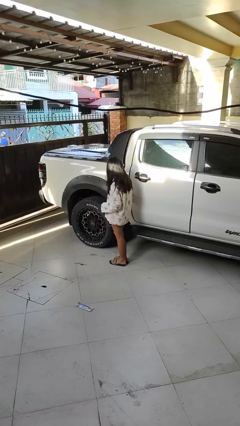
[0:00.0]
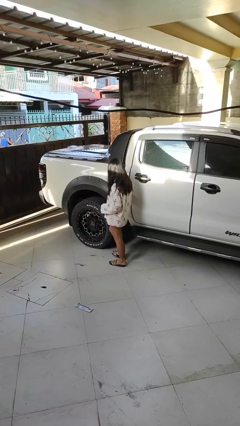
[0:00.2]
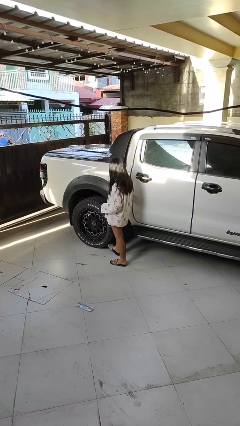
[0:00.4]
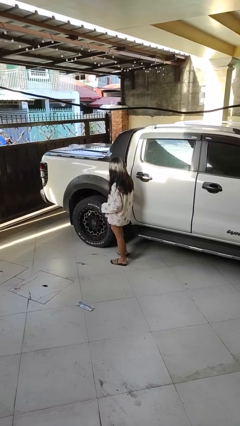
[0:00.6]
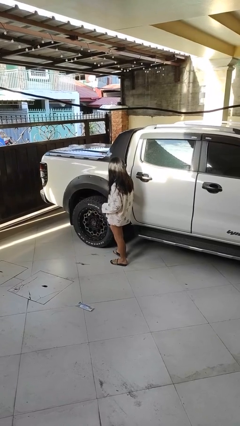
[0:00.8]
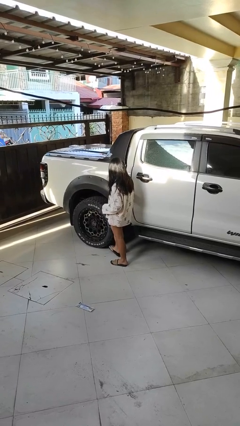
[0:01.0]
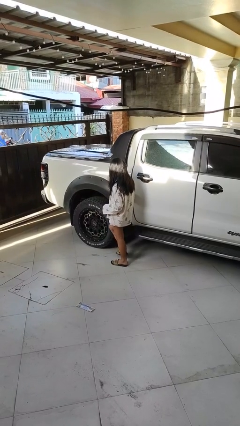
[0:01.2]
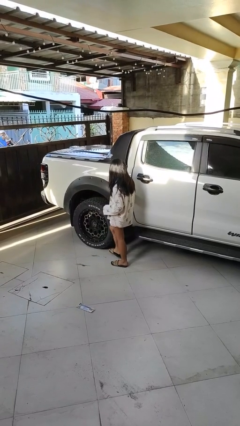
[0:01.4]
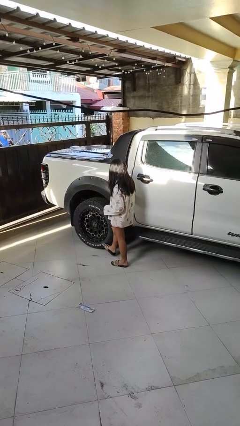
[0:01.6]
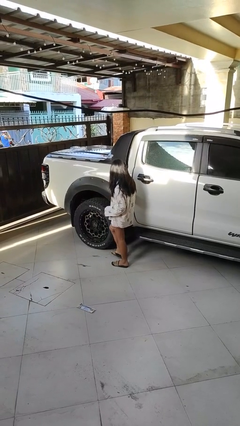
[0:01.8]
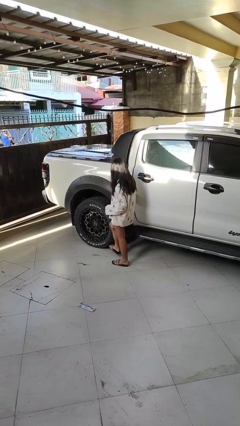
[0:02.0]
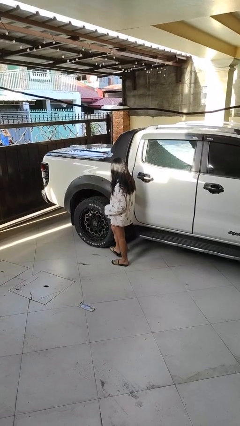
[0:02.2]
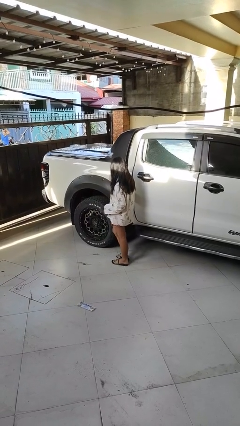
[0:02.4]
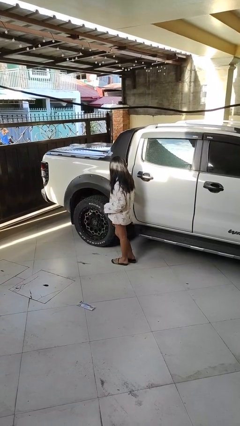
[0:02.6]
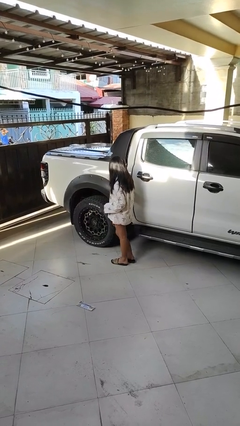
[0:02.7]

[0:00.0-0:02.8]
person kicks car tires

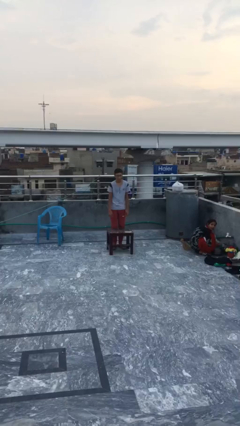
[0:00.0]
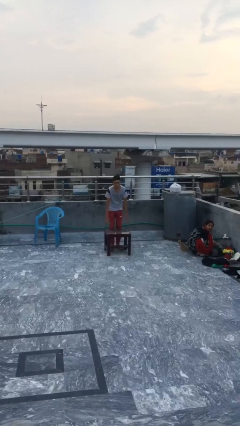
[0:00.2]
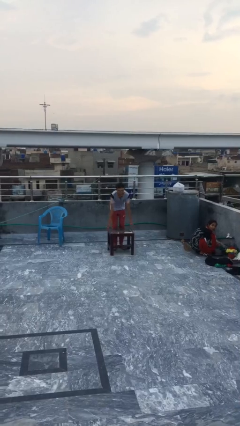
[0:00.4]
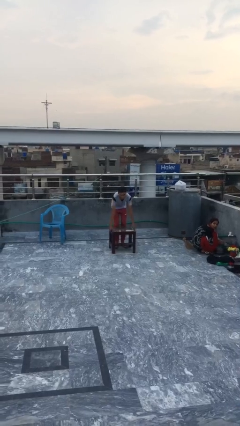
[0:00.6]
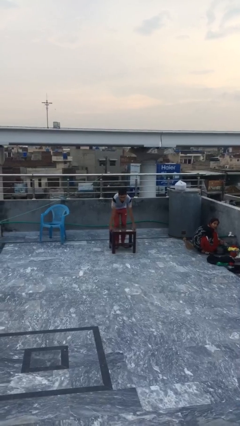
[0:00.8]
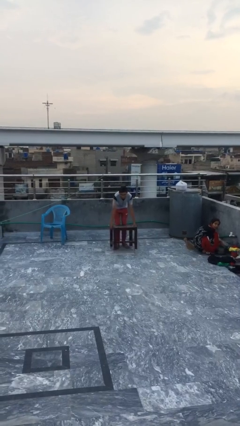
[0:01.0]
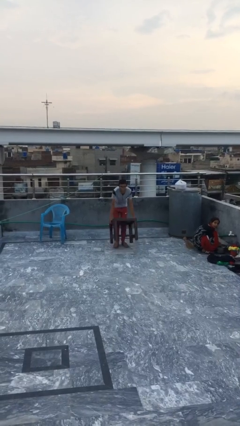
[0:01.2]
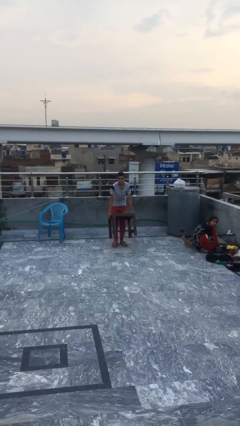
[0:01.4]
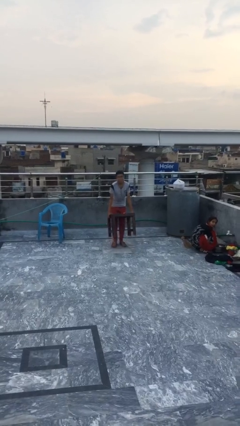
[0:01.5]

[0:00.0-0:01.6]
person picks up object from floor

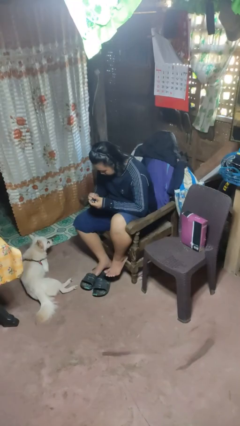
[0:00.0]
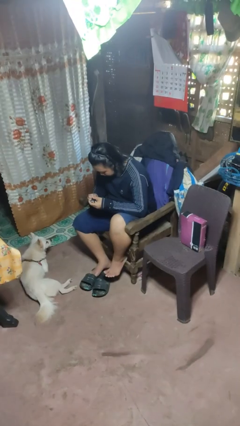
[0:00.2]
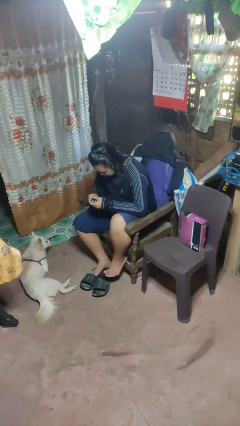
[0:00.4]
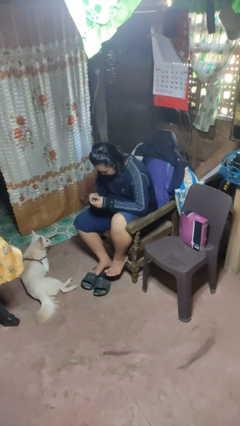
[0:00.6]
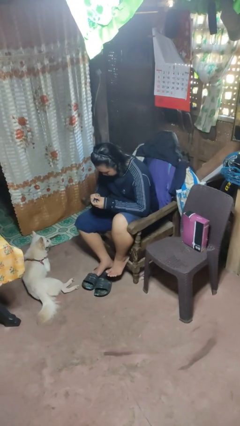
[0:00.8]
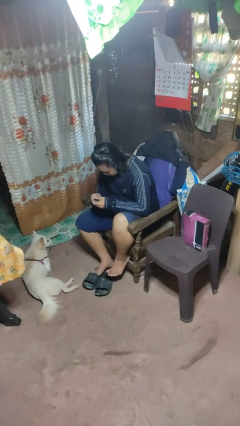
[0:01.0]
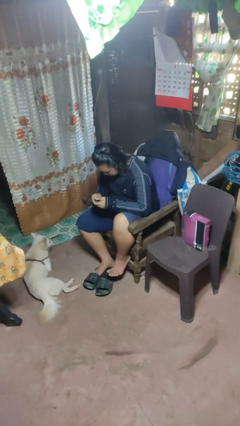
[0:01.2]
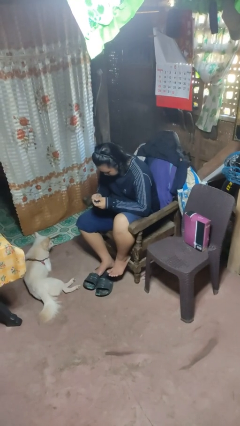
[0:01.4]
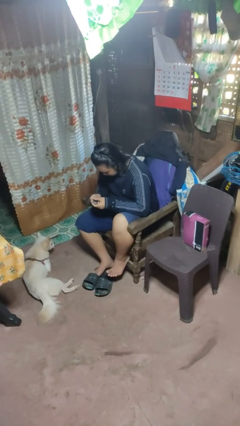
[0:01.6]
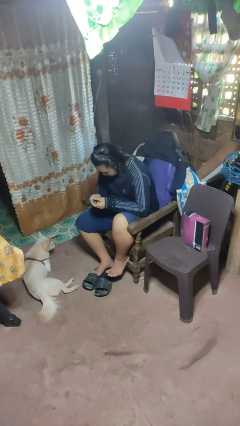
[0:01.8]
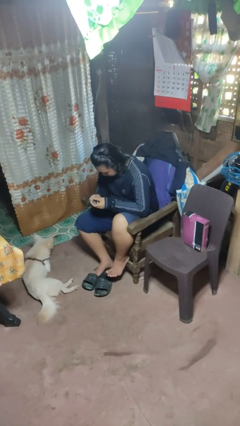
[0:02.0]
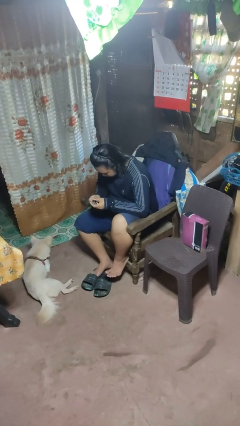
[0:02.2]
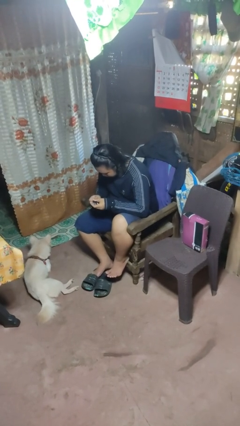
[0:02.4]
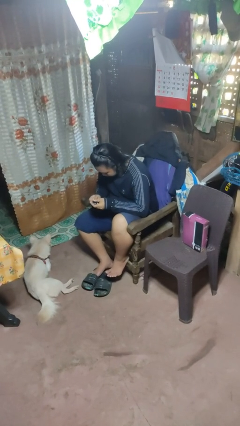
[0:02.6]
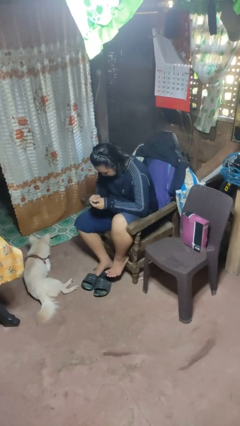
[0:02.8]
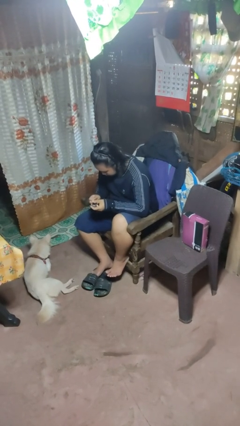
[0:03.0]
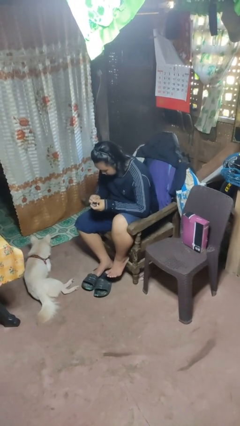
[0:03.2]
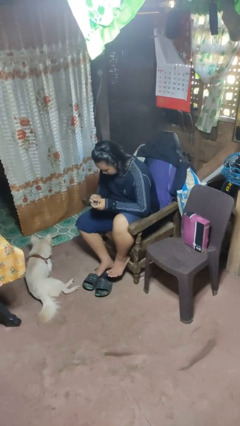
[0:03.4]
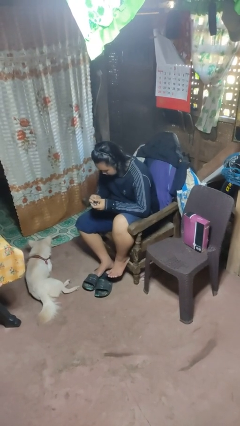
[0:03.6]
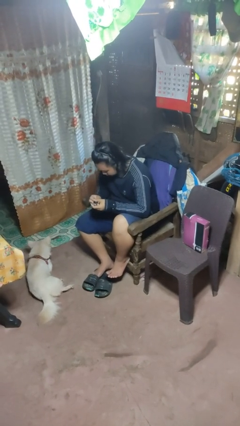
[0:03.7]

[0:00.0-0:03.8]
person clips fingernails

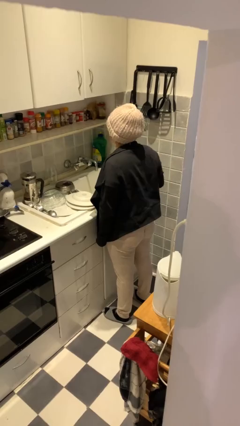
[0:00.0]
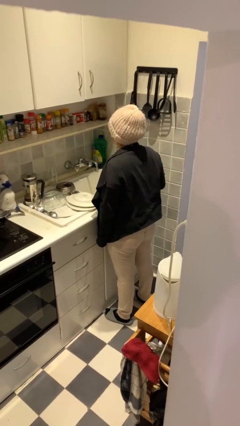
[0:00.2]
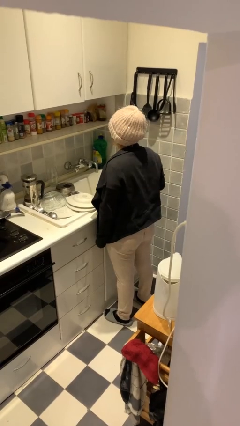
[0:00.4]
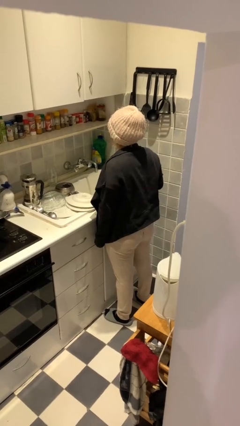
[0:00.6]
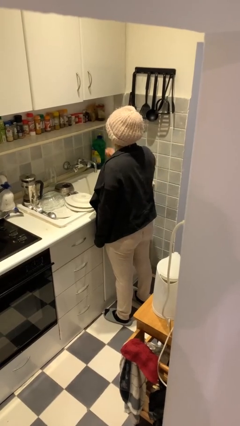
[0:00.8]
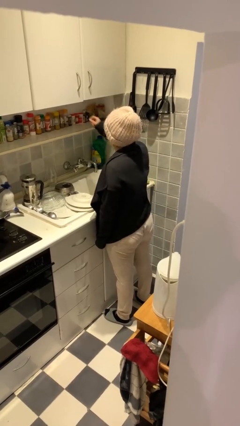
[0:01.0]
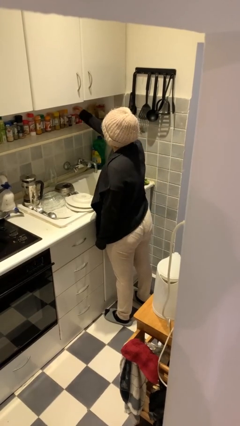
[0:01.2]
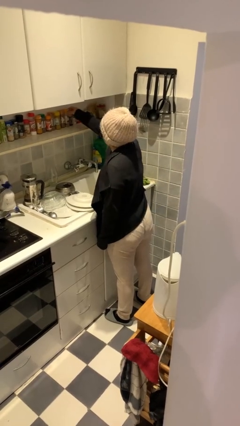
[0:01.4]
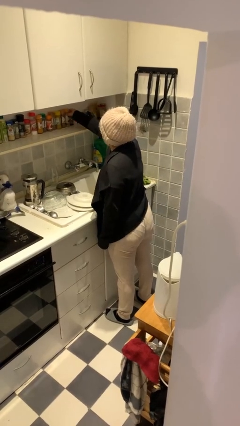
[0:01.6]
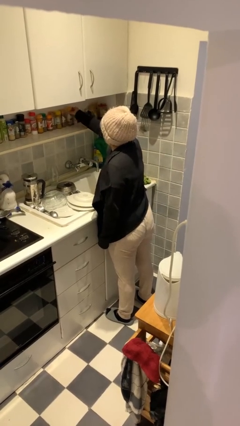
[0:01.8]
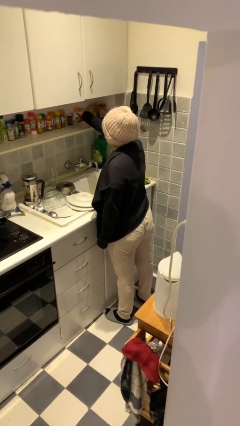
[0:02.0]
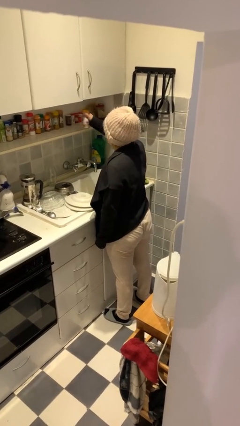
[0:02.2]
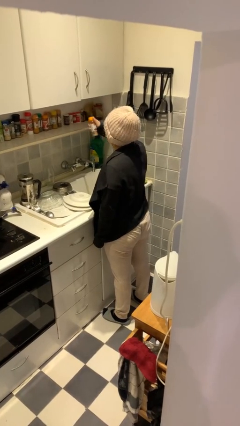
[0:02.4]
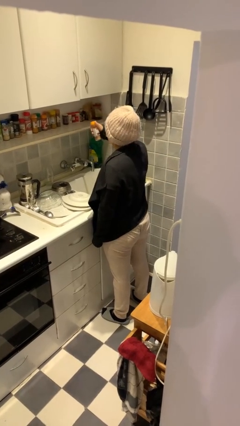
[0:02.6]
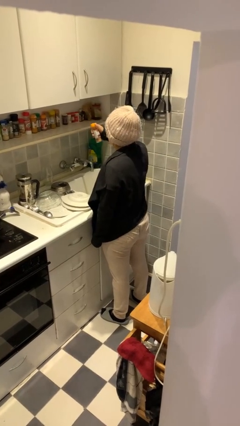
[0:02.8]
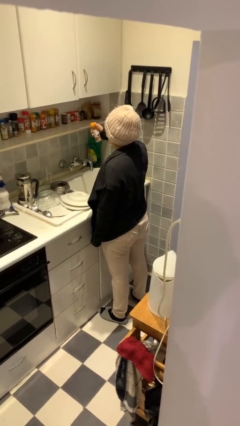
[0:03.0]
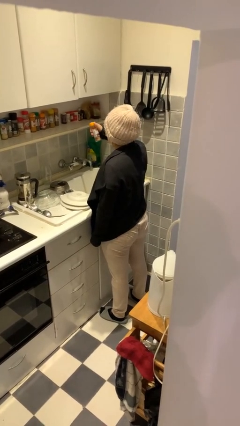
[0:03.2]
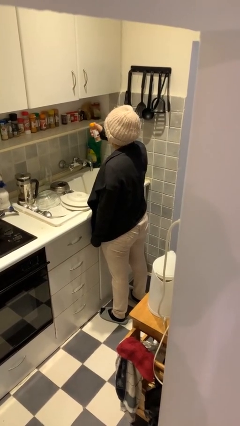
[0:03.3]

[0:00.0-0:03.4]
person picks up object from countertop

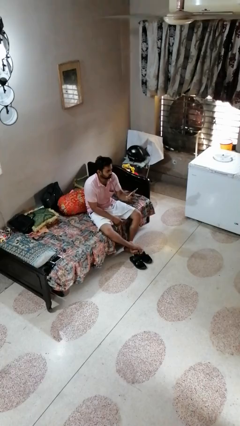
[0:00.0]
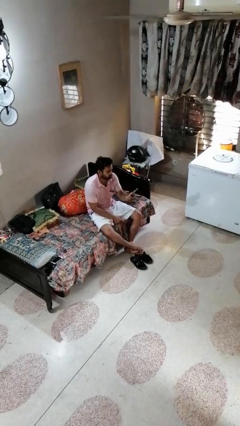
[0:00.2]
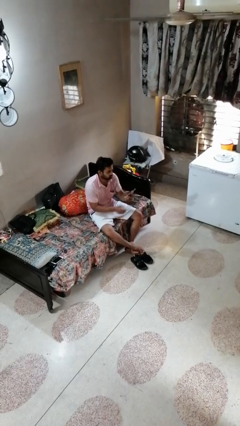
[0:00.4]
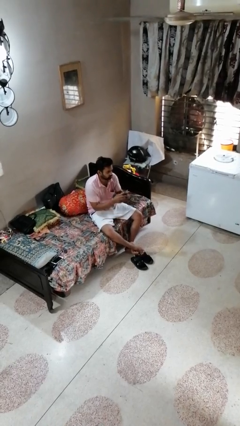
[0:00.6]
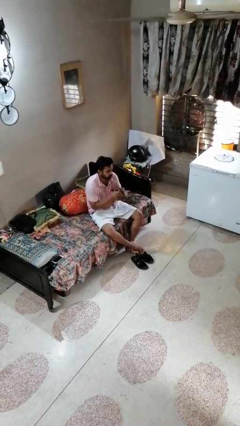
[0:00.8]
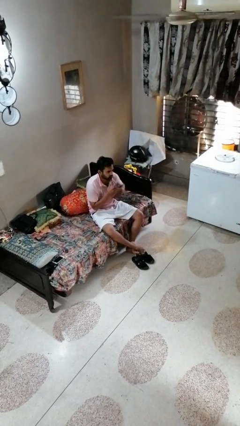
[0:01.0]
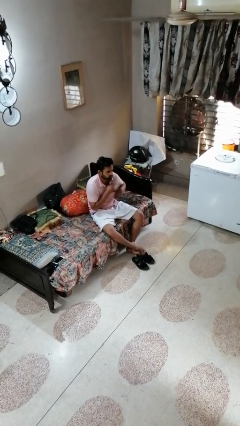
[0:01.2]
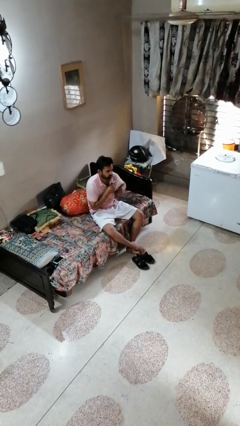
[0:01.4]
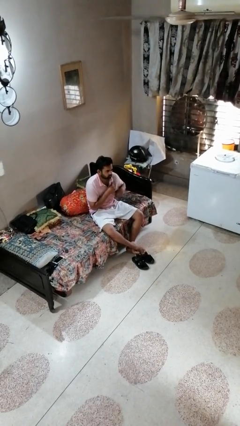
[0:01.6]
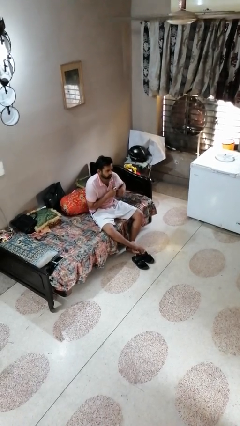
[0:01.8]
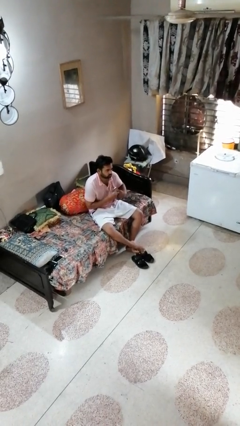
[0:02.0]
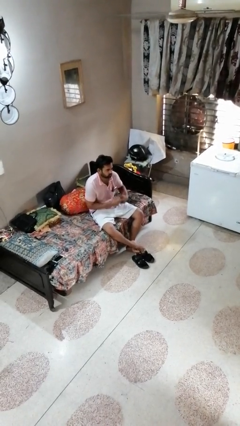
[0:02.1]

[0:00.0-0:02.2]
person puts phone into pocket

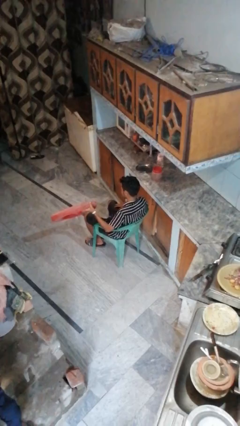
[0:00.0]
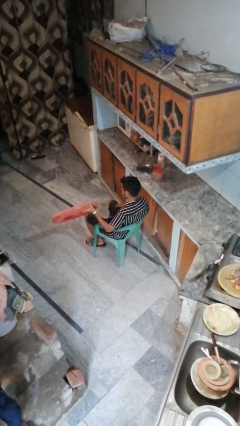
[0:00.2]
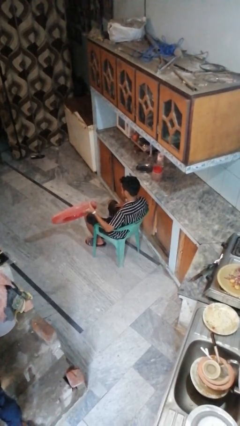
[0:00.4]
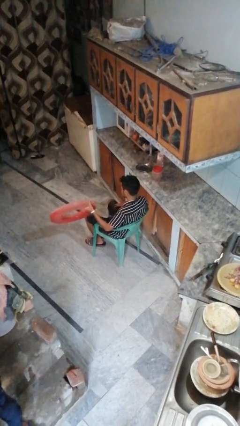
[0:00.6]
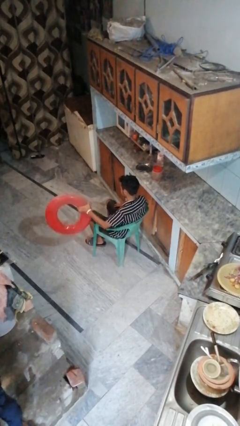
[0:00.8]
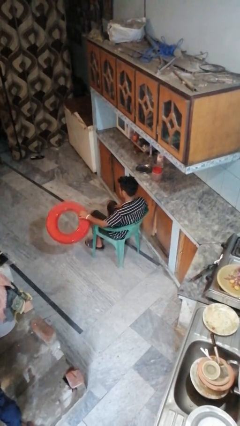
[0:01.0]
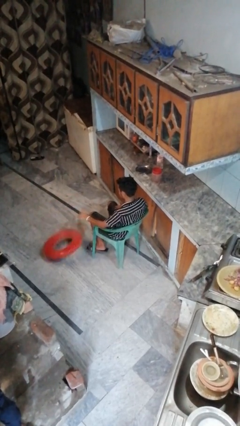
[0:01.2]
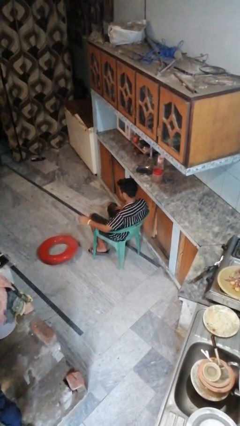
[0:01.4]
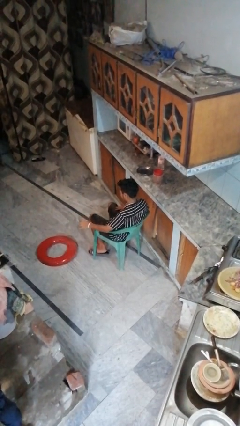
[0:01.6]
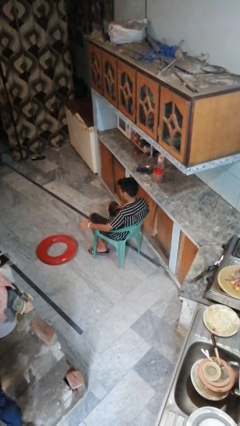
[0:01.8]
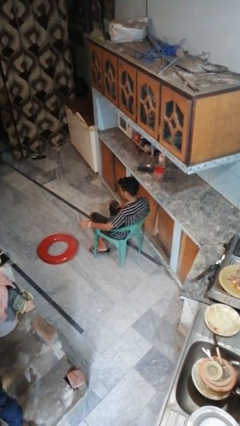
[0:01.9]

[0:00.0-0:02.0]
person throws object to ground

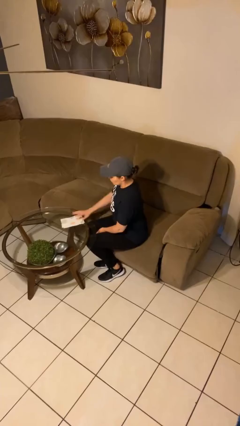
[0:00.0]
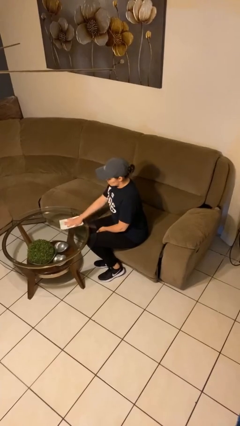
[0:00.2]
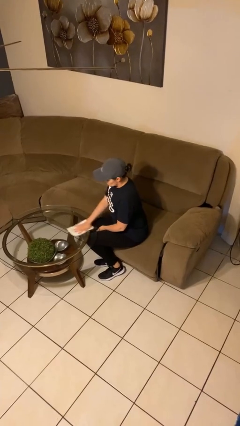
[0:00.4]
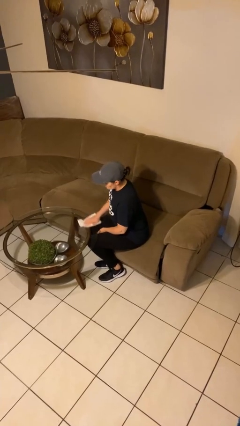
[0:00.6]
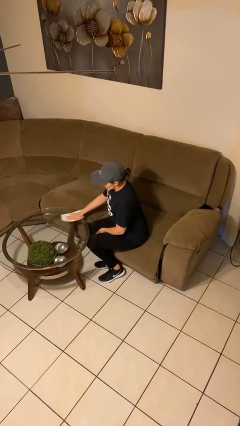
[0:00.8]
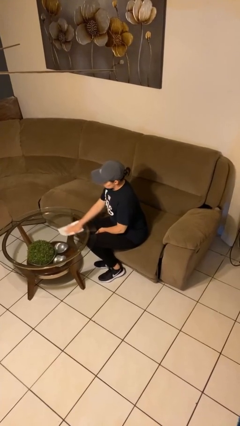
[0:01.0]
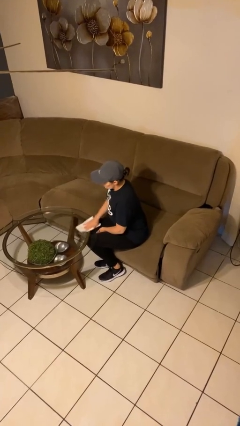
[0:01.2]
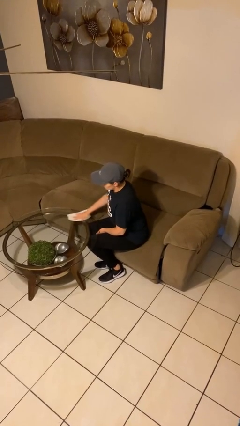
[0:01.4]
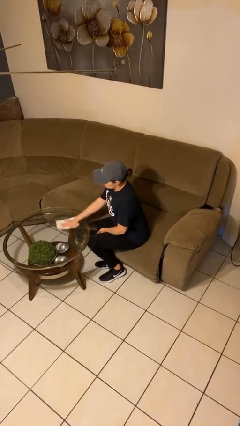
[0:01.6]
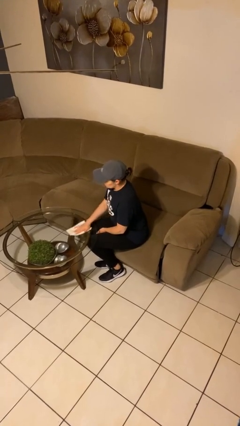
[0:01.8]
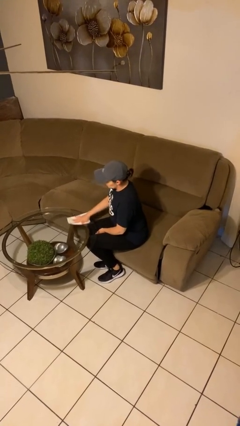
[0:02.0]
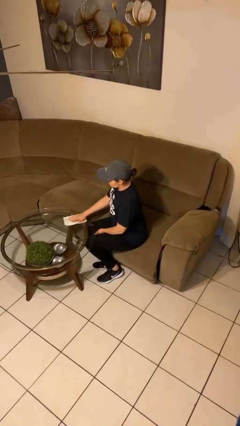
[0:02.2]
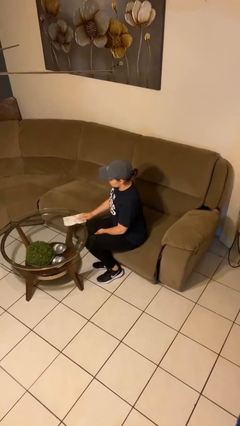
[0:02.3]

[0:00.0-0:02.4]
person cleans table with rag
